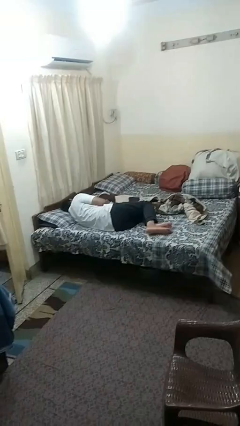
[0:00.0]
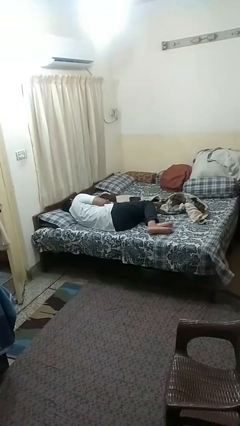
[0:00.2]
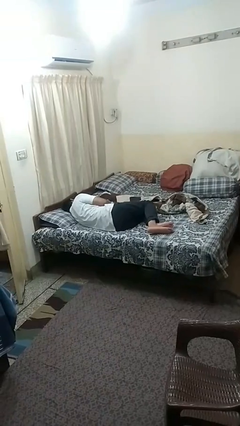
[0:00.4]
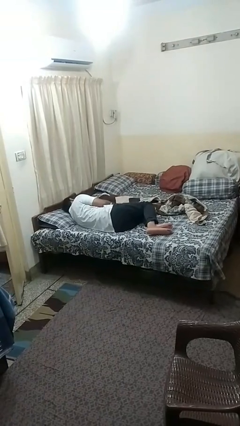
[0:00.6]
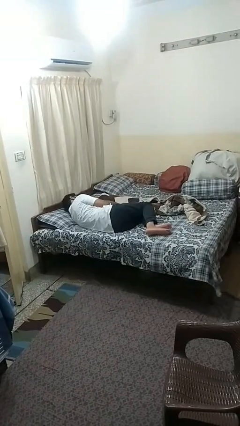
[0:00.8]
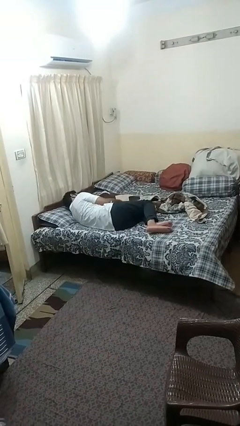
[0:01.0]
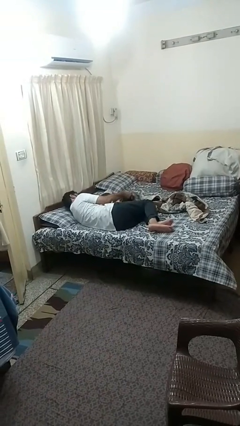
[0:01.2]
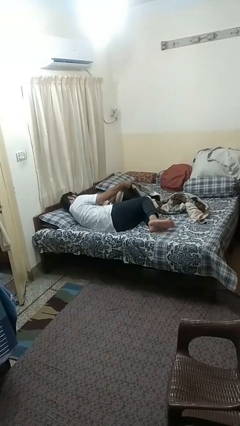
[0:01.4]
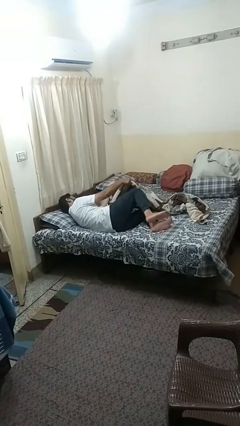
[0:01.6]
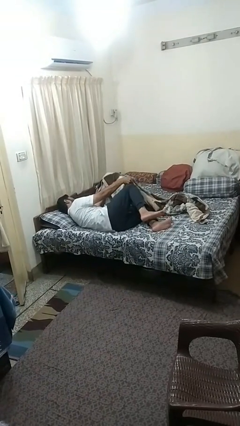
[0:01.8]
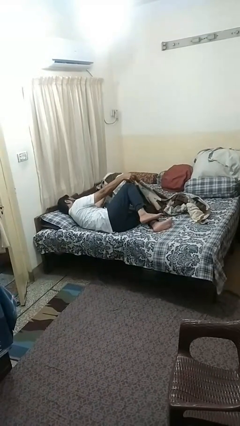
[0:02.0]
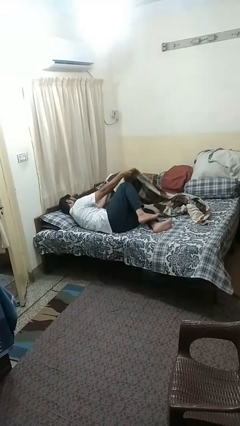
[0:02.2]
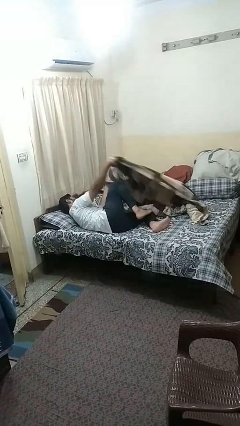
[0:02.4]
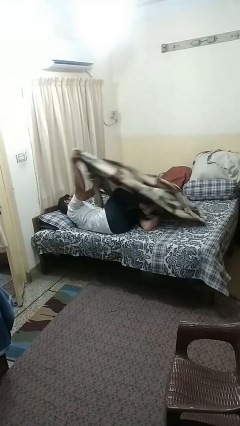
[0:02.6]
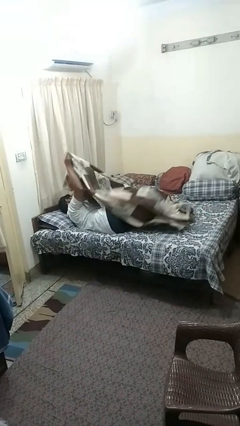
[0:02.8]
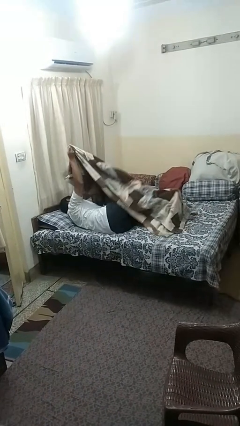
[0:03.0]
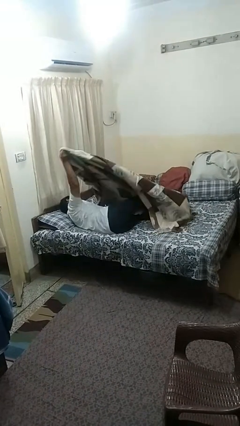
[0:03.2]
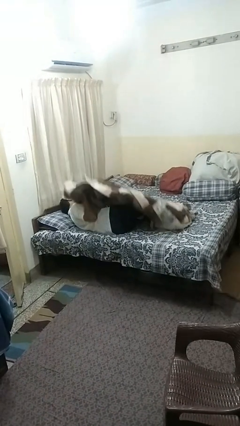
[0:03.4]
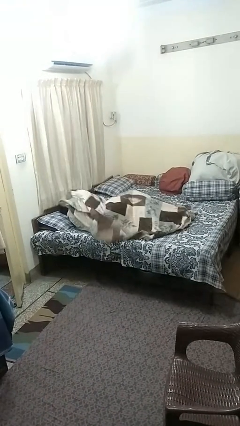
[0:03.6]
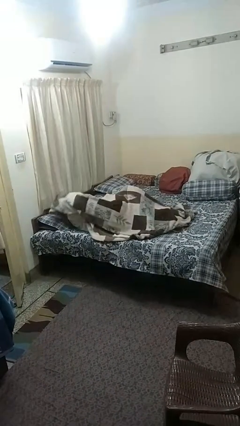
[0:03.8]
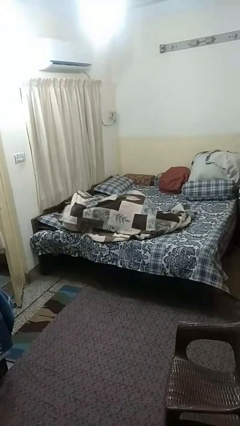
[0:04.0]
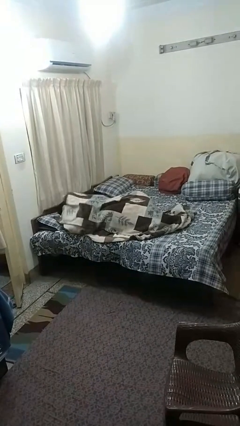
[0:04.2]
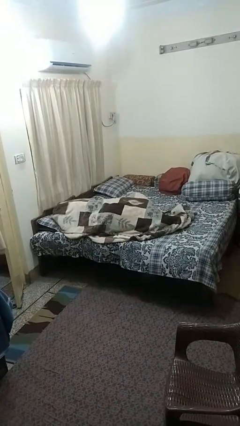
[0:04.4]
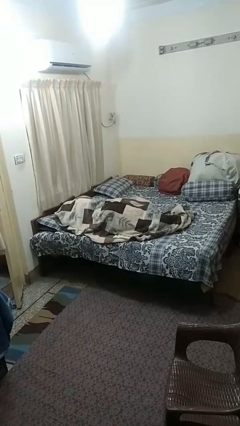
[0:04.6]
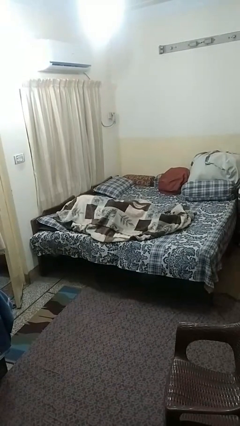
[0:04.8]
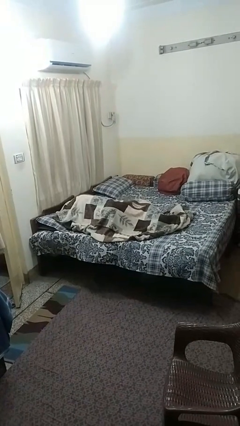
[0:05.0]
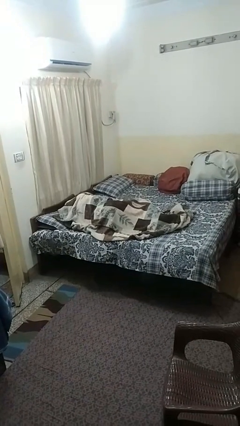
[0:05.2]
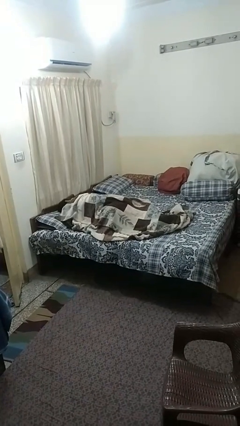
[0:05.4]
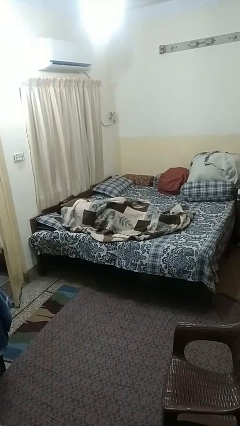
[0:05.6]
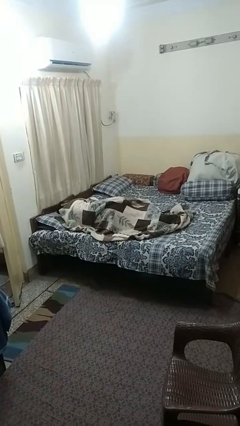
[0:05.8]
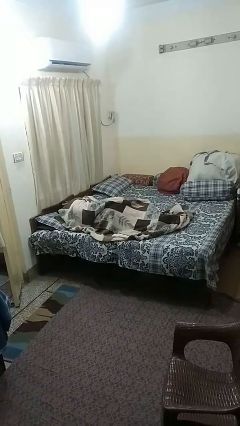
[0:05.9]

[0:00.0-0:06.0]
person covers with blanket

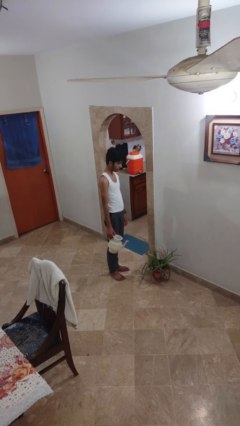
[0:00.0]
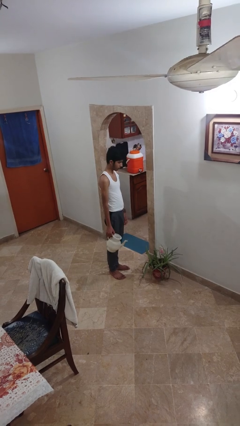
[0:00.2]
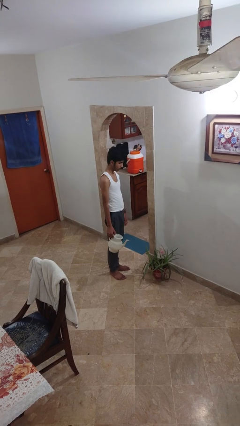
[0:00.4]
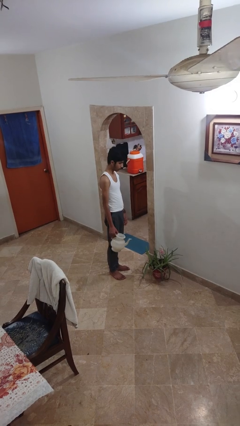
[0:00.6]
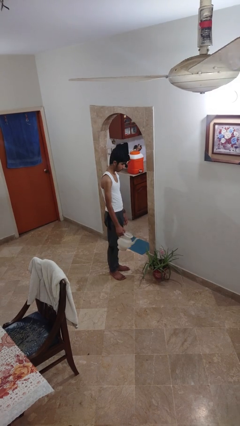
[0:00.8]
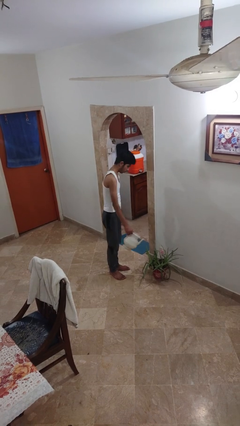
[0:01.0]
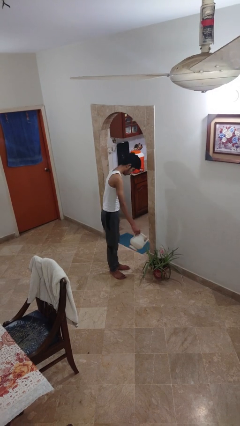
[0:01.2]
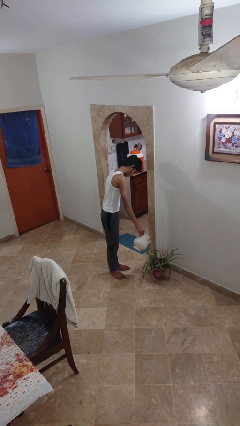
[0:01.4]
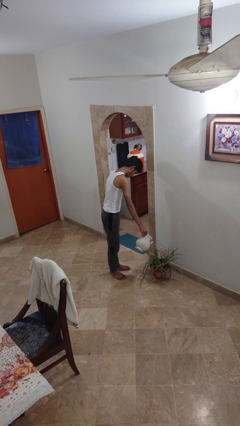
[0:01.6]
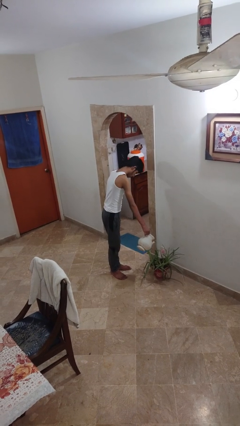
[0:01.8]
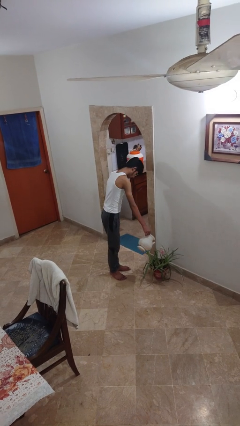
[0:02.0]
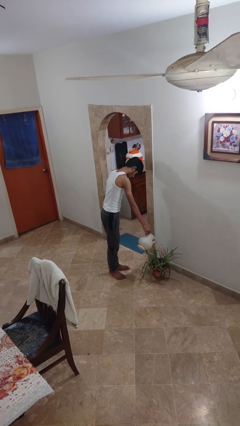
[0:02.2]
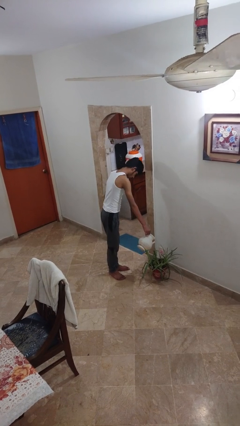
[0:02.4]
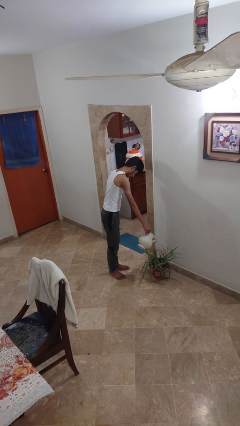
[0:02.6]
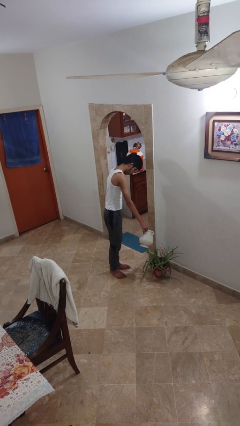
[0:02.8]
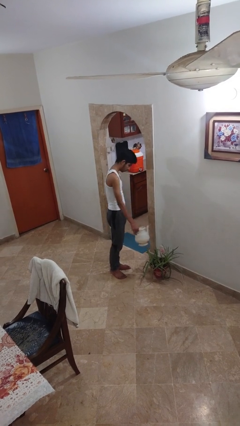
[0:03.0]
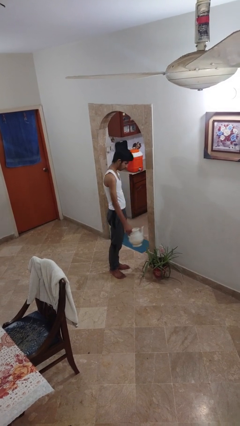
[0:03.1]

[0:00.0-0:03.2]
person waters houseplant

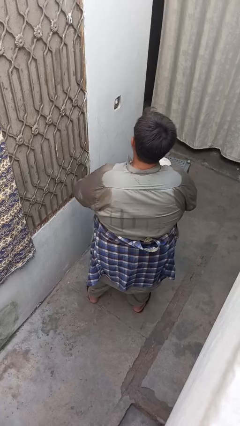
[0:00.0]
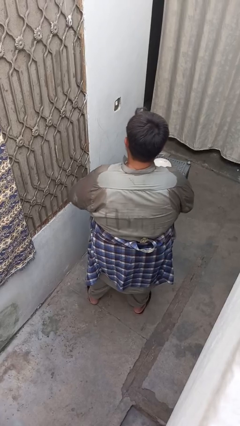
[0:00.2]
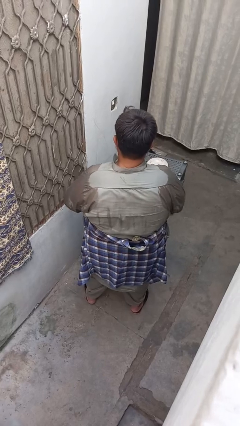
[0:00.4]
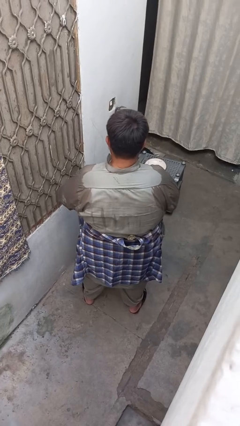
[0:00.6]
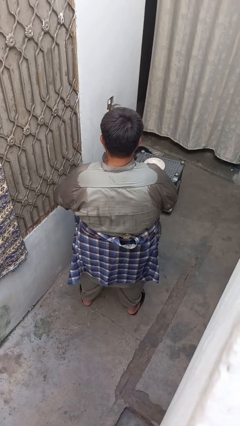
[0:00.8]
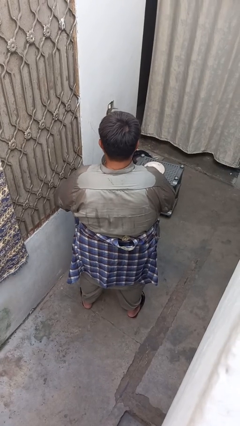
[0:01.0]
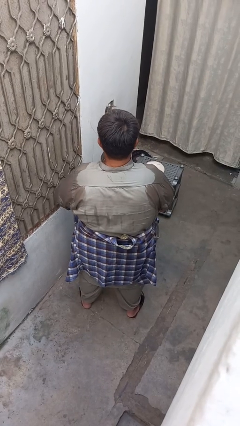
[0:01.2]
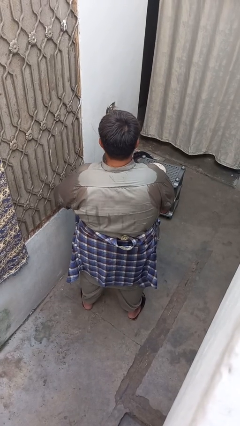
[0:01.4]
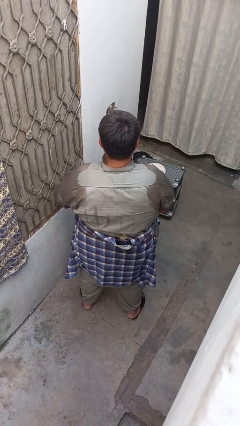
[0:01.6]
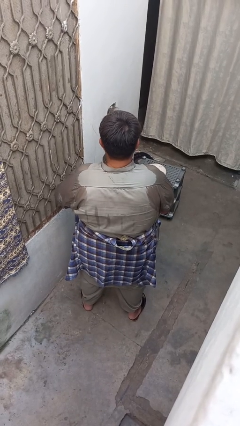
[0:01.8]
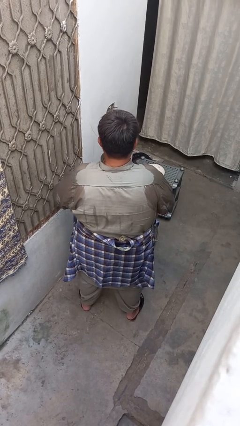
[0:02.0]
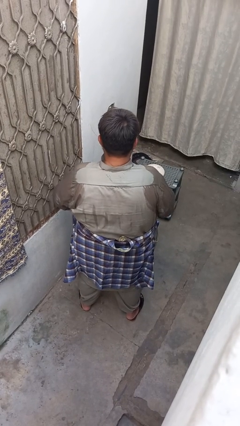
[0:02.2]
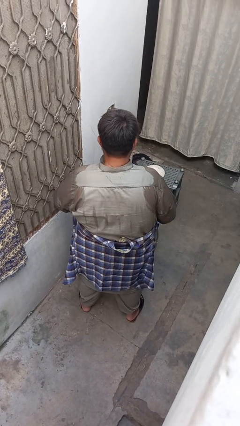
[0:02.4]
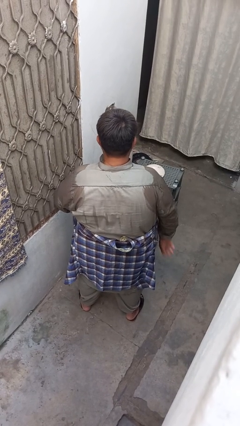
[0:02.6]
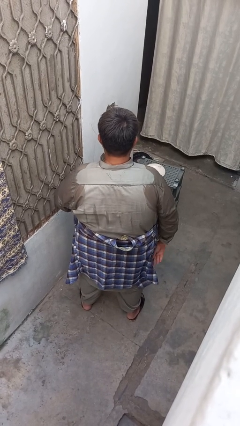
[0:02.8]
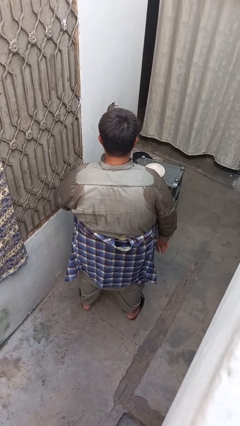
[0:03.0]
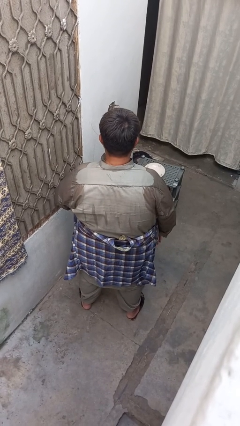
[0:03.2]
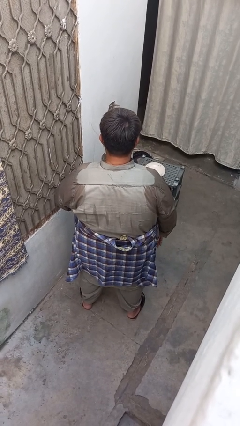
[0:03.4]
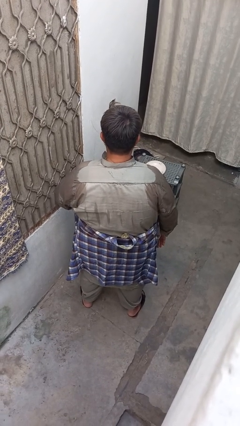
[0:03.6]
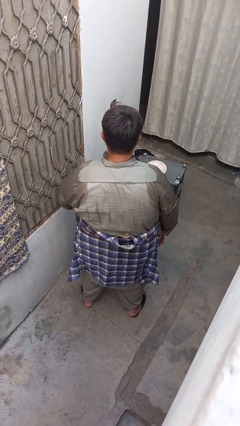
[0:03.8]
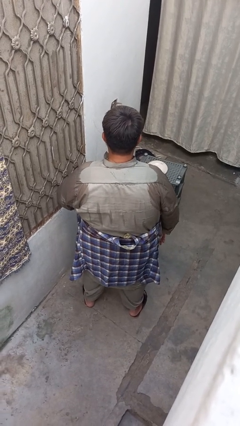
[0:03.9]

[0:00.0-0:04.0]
person ties jacket around waist

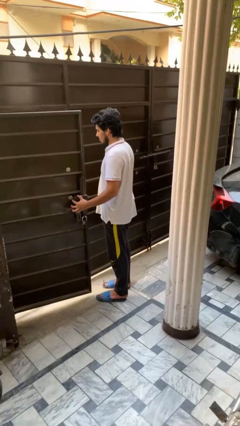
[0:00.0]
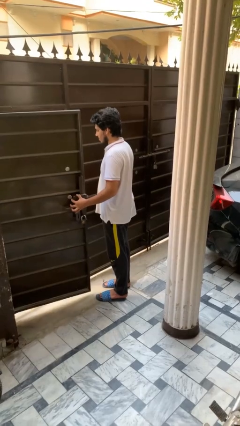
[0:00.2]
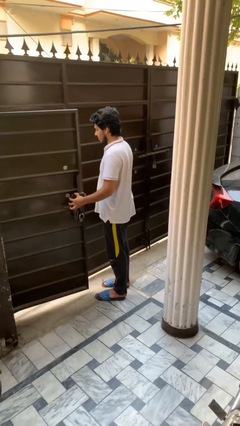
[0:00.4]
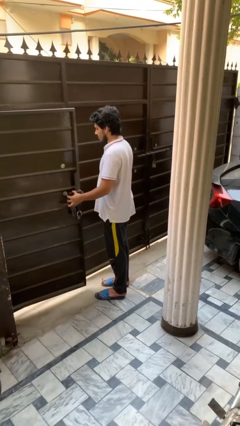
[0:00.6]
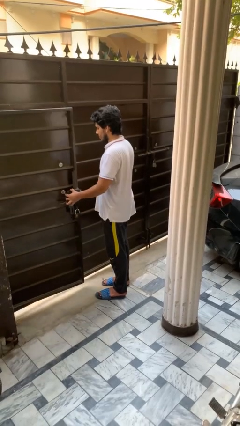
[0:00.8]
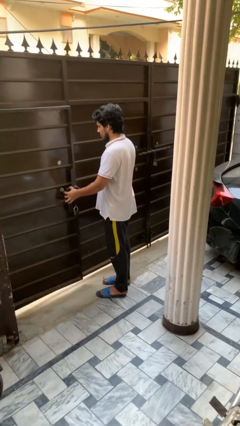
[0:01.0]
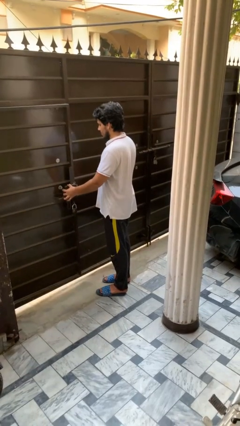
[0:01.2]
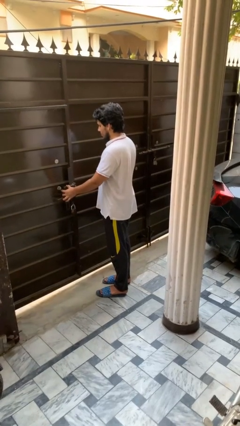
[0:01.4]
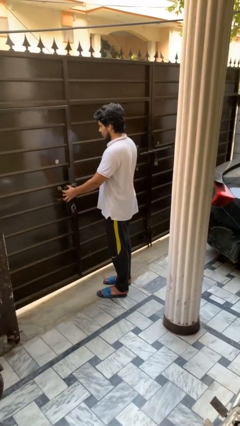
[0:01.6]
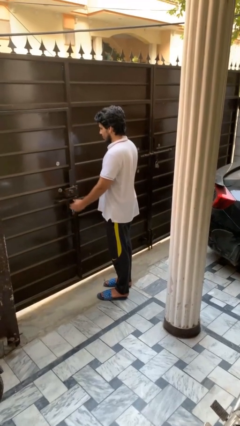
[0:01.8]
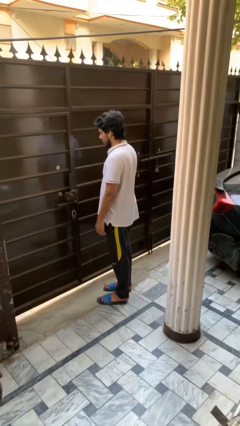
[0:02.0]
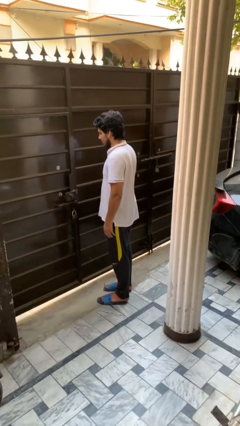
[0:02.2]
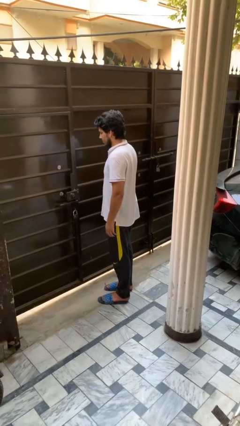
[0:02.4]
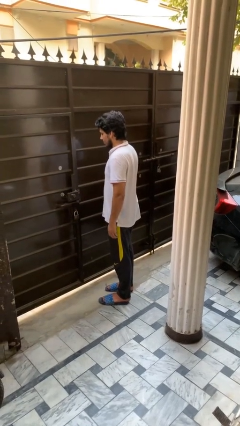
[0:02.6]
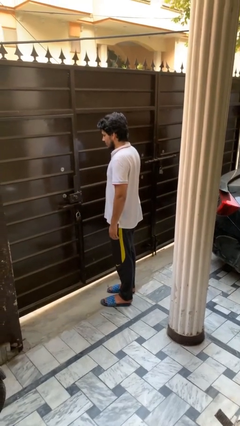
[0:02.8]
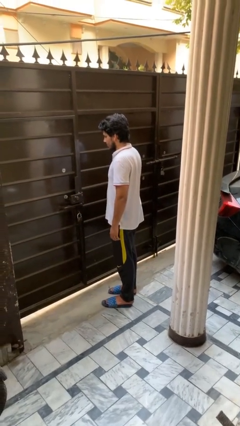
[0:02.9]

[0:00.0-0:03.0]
person closes gate

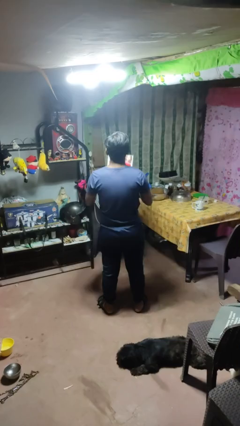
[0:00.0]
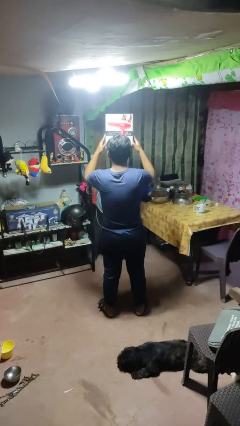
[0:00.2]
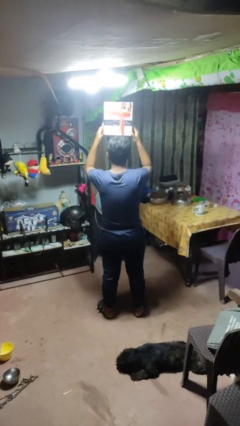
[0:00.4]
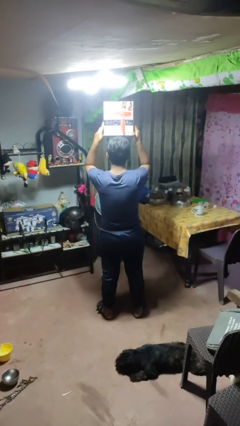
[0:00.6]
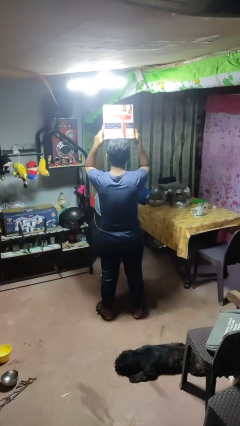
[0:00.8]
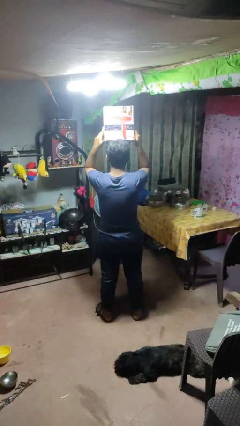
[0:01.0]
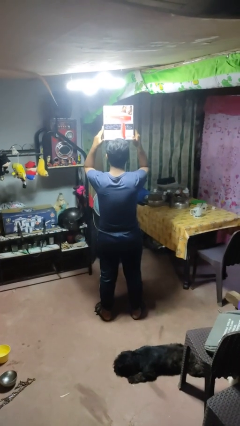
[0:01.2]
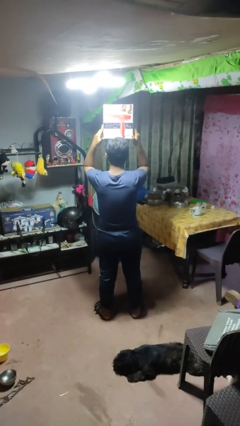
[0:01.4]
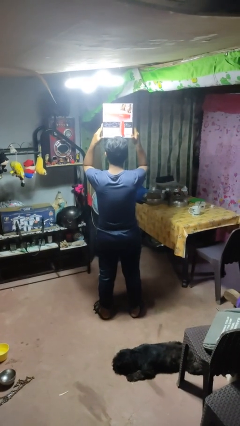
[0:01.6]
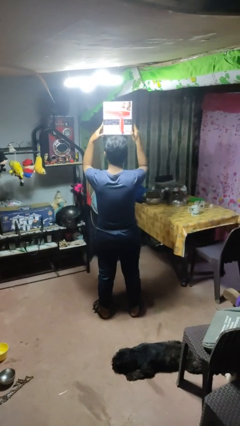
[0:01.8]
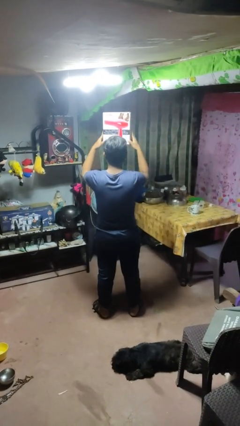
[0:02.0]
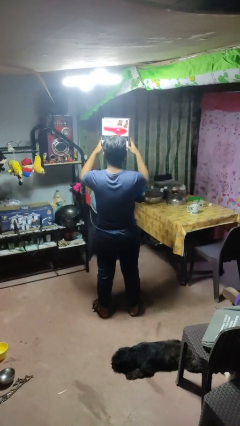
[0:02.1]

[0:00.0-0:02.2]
person holds object above head
